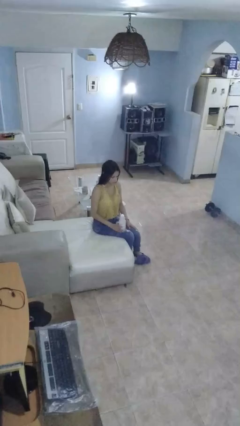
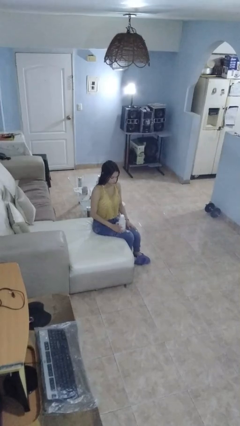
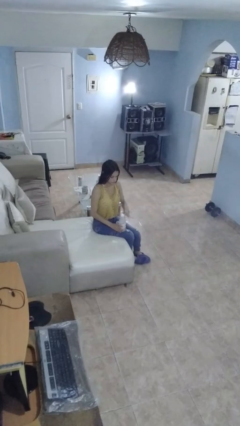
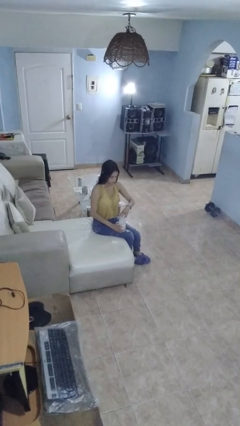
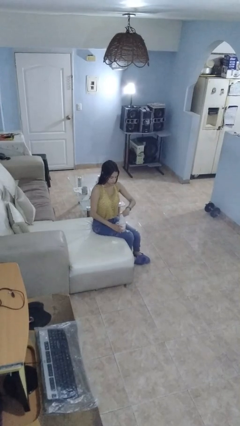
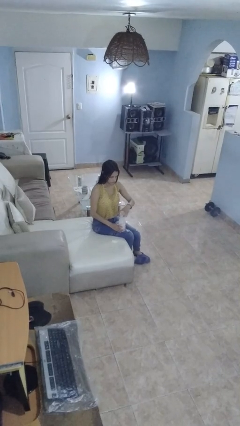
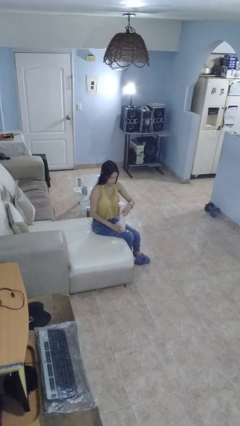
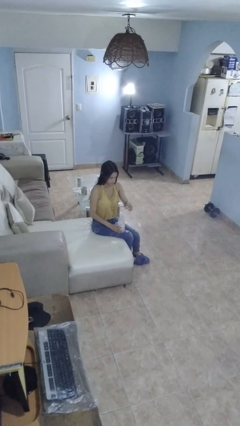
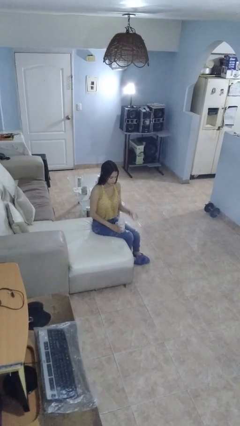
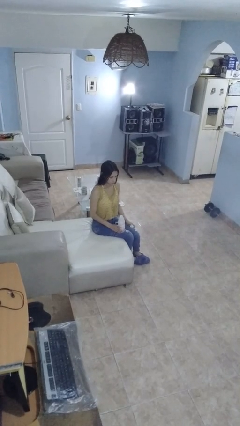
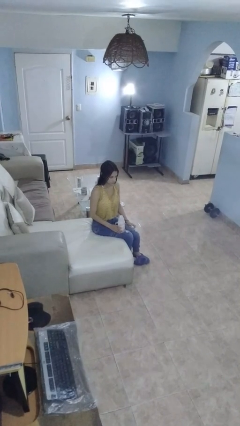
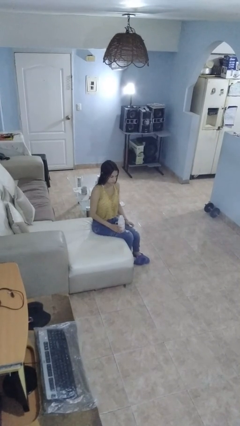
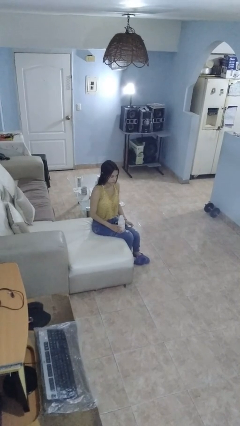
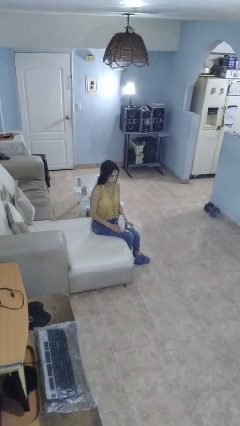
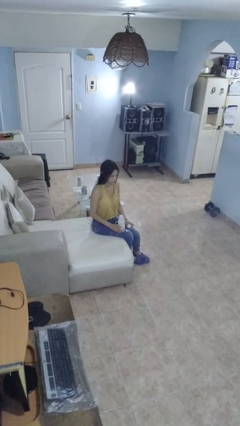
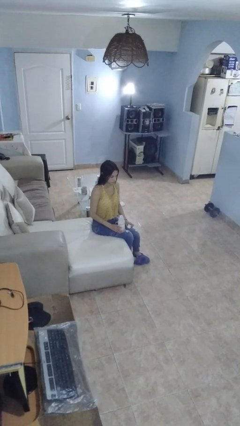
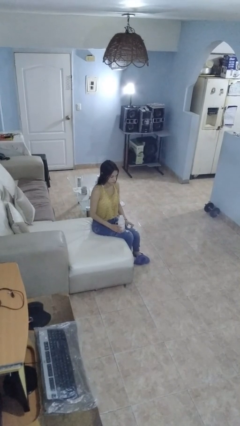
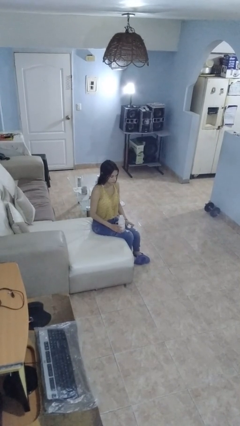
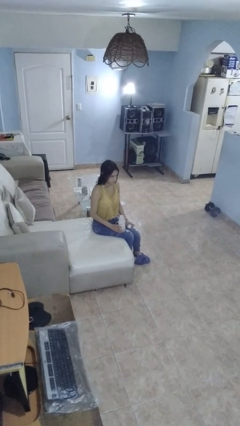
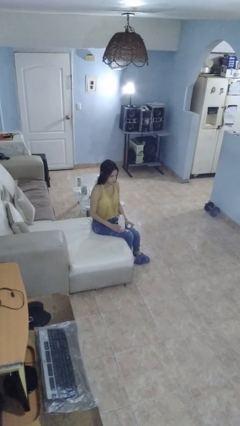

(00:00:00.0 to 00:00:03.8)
person unscrews lid from bottle

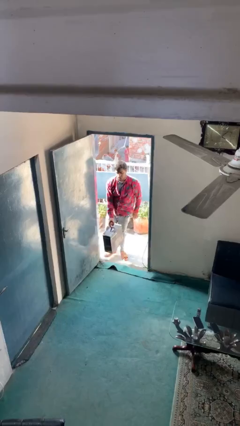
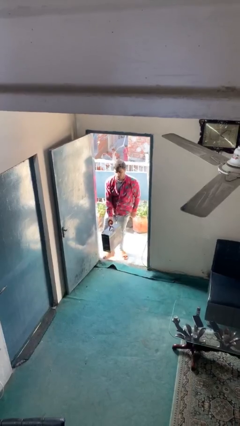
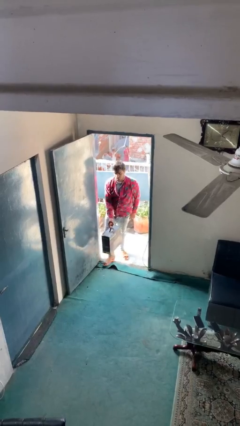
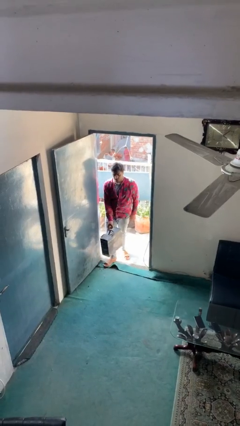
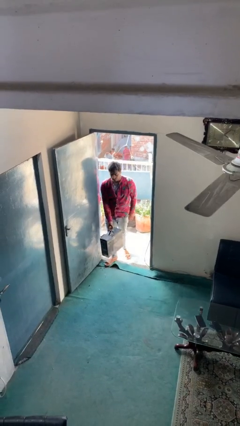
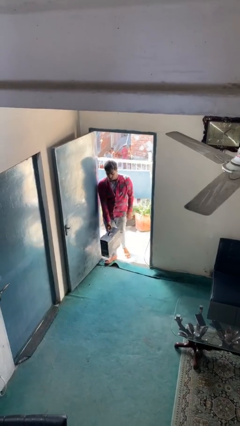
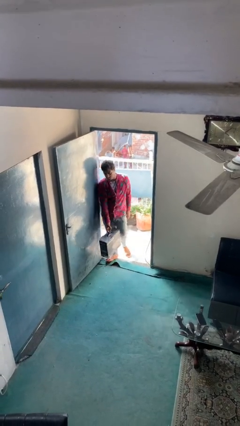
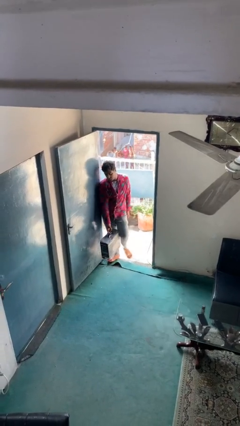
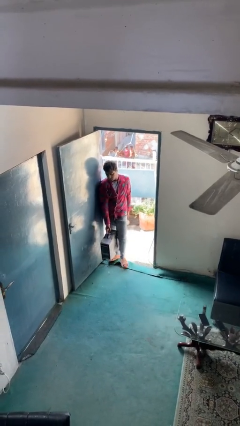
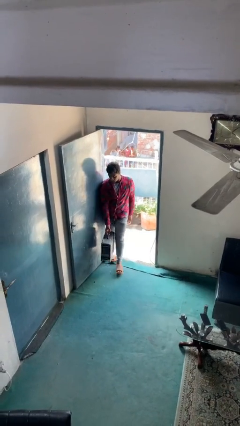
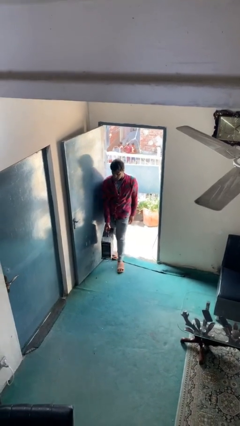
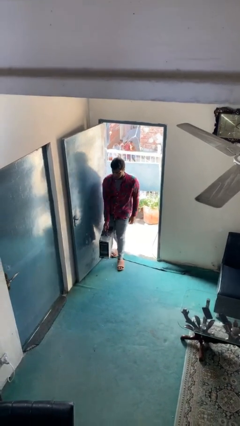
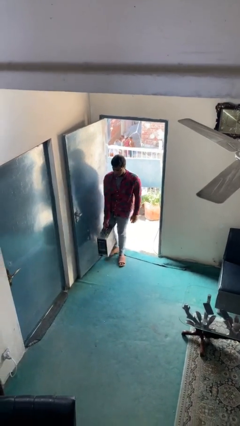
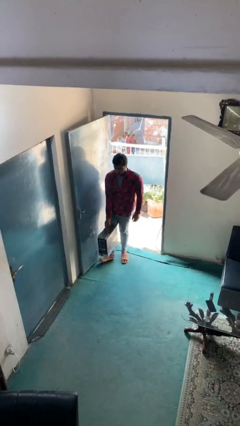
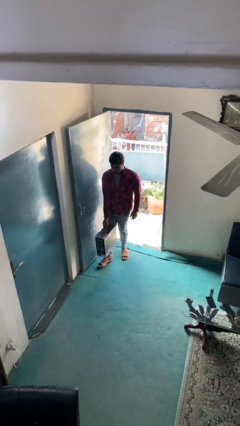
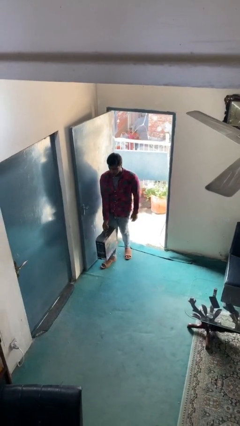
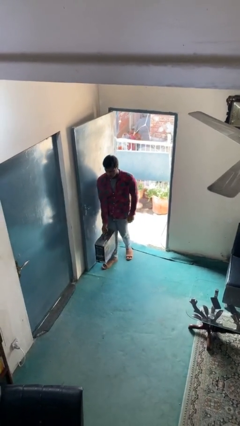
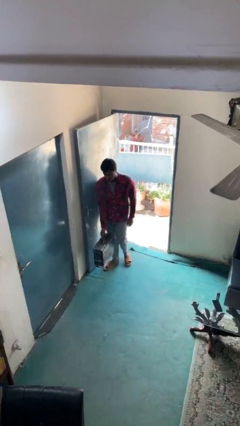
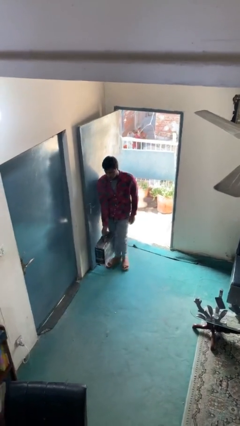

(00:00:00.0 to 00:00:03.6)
person carries heavy object

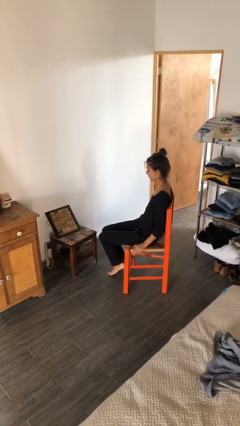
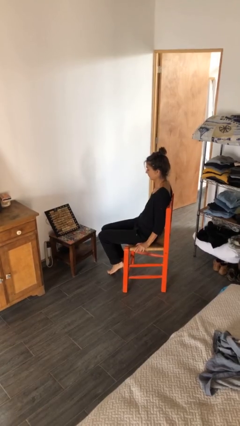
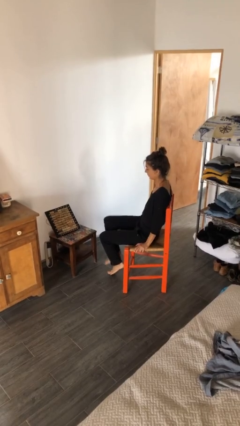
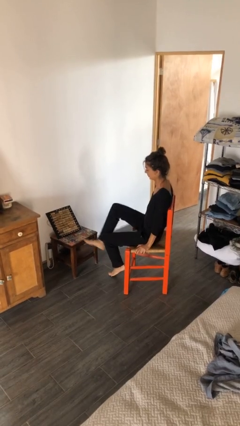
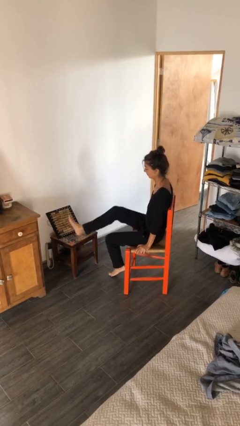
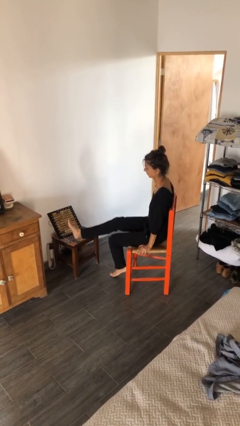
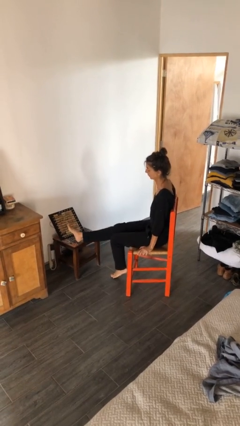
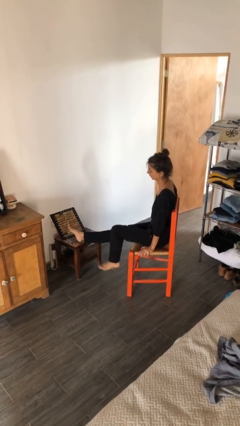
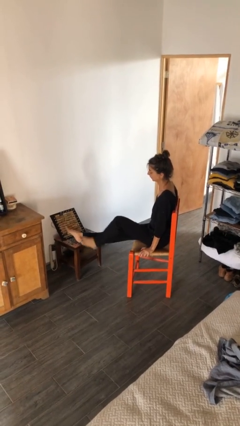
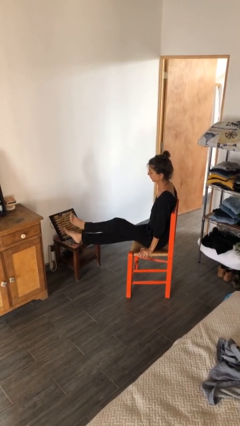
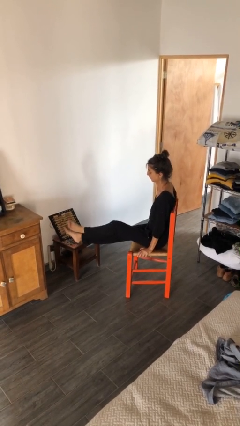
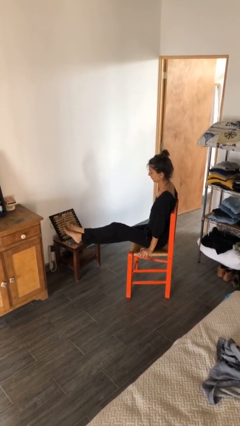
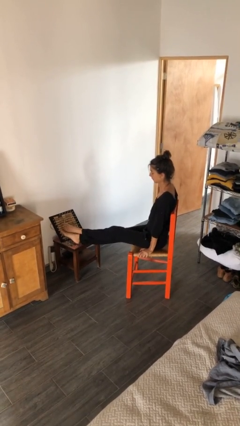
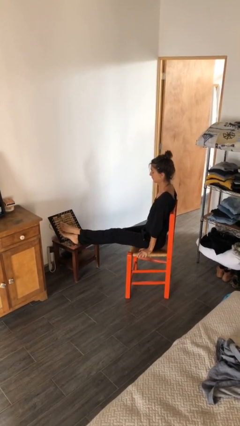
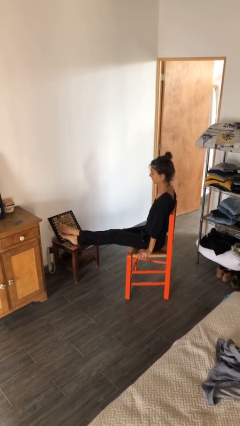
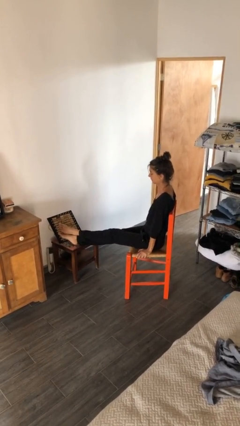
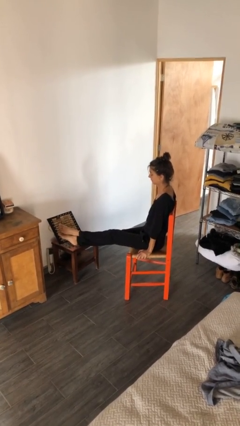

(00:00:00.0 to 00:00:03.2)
person puts feet up

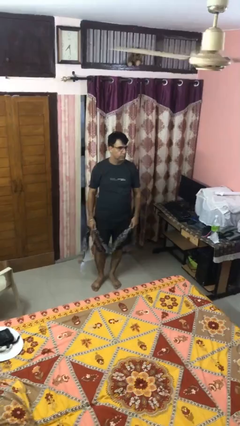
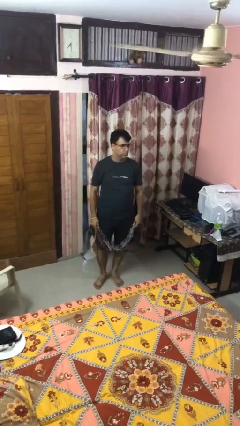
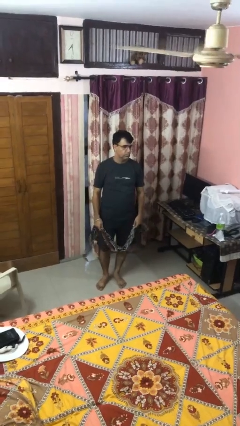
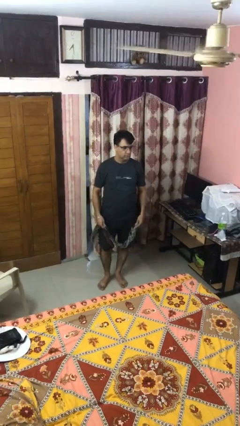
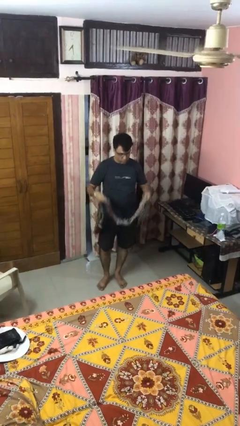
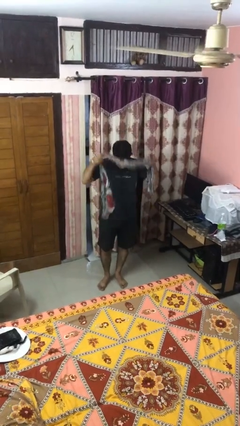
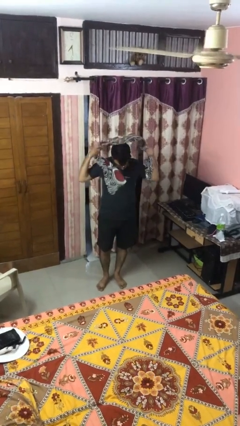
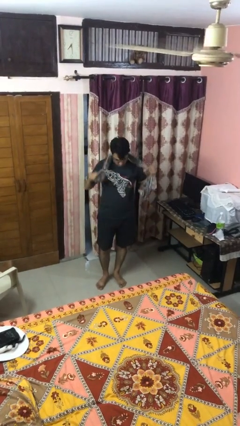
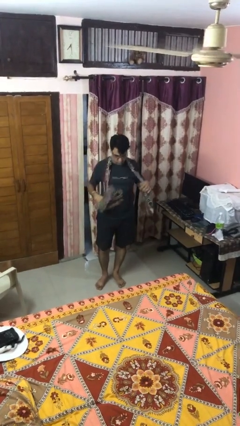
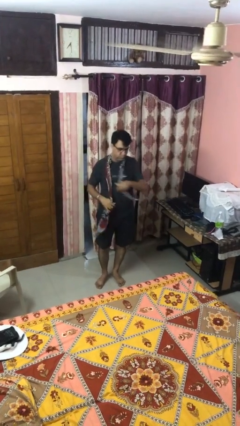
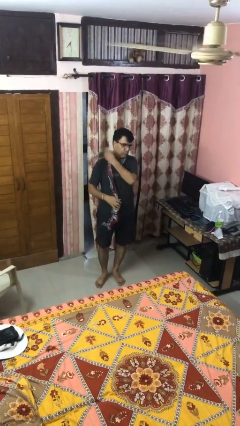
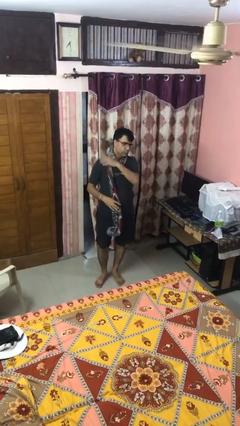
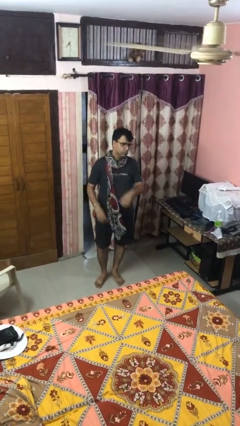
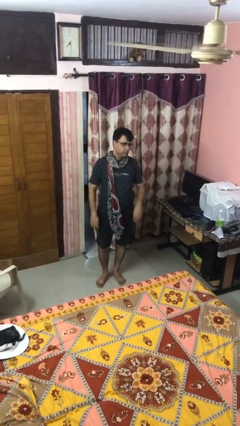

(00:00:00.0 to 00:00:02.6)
person puts on scarf

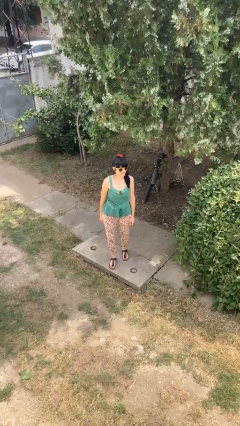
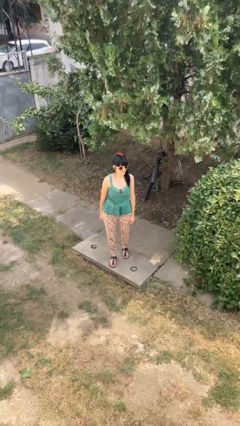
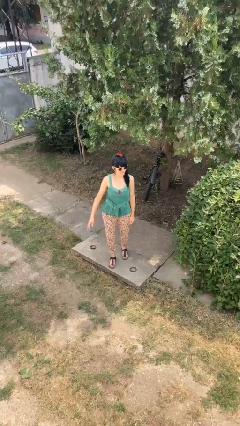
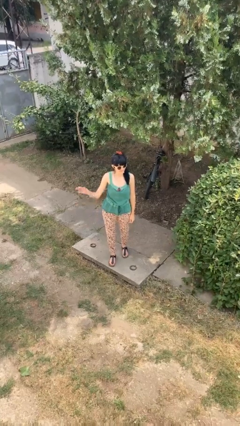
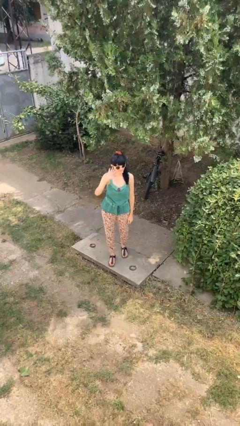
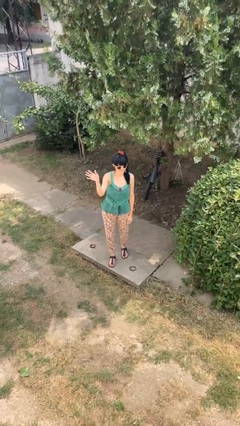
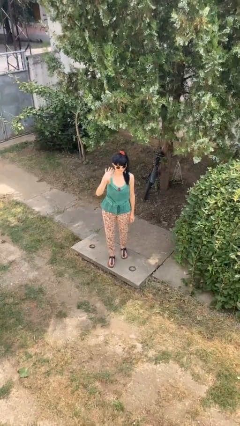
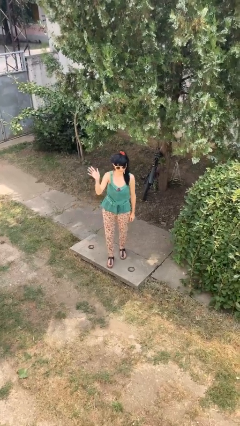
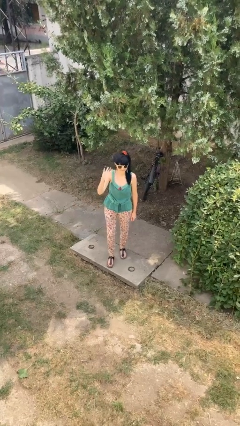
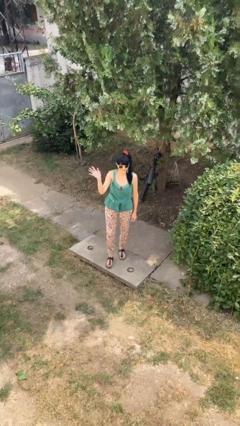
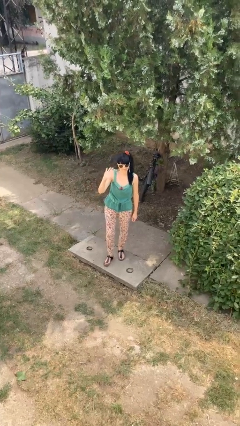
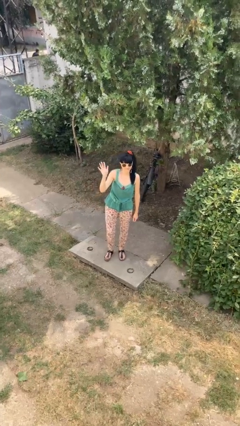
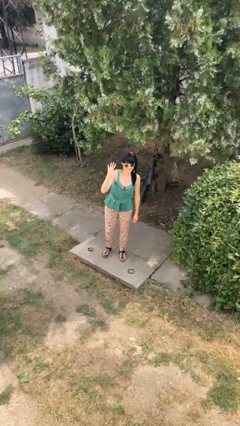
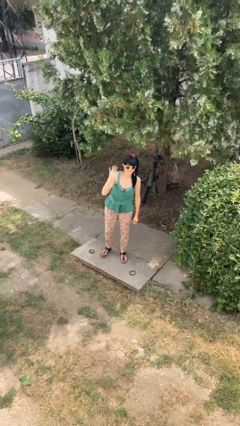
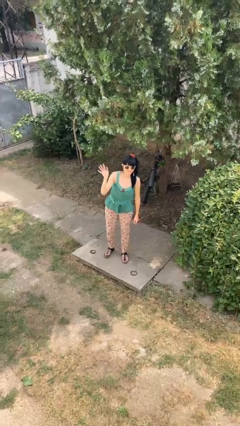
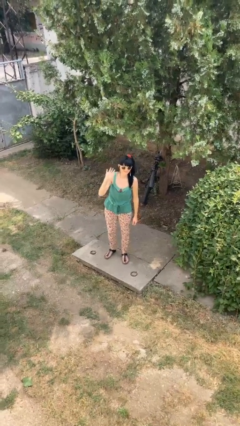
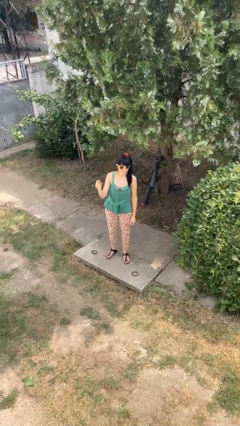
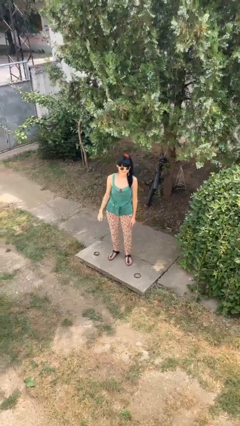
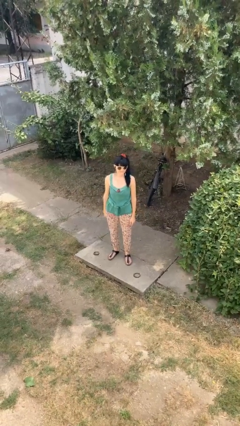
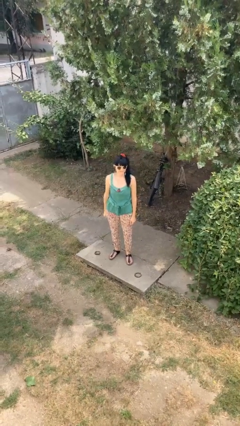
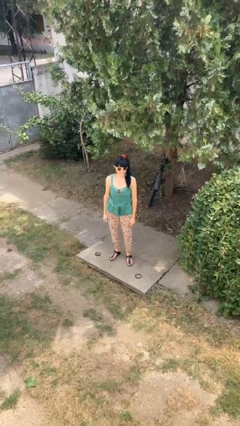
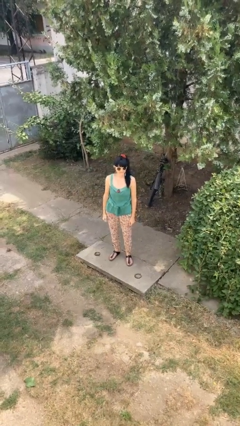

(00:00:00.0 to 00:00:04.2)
person waves at person

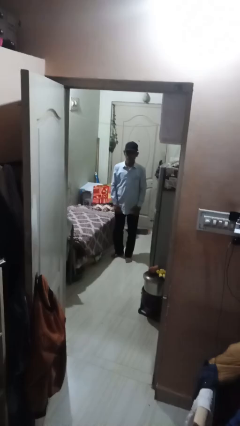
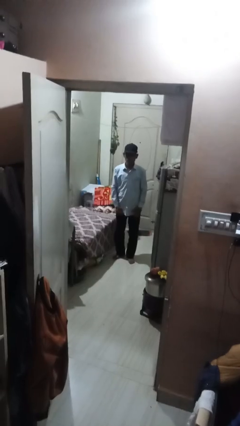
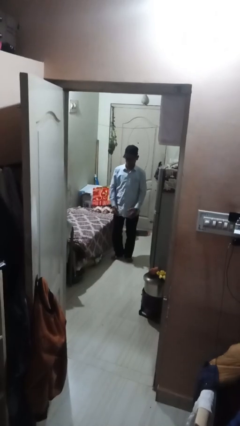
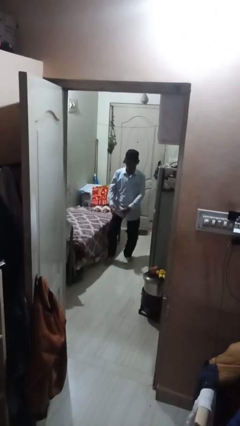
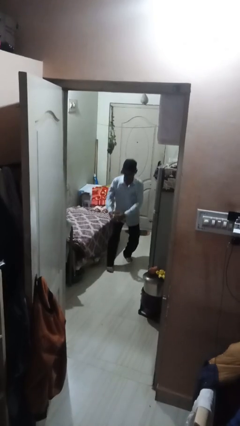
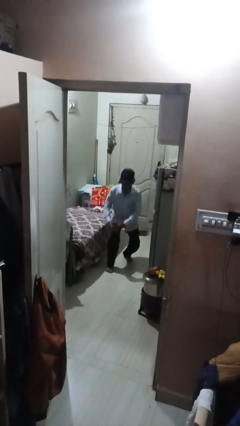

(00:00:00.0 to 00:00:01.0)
person exercises with lunges
